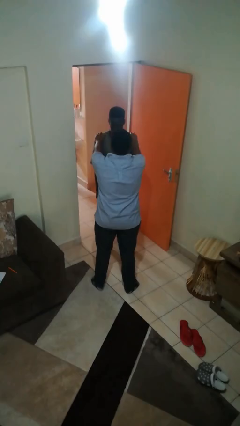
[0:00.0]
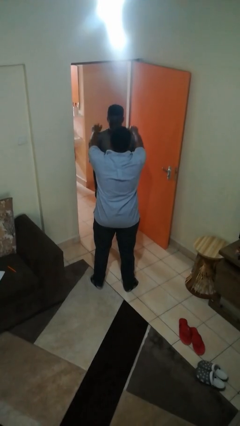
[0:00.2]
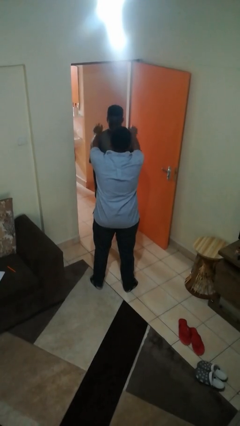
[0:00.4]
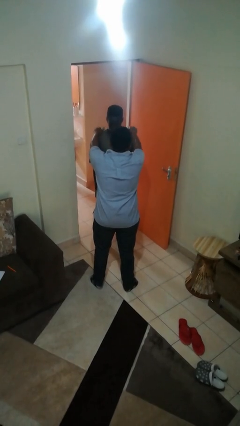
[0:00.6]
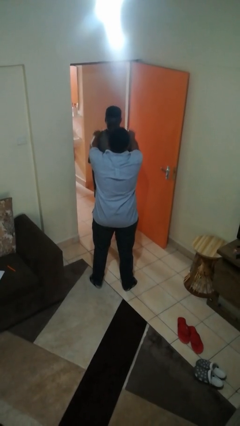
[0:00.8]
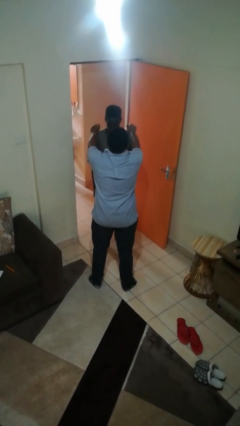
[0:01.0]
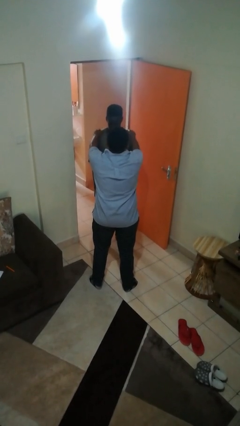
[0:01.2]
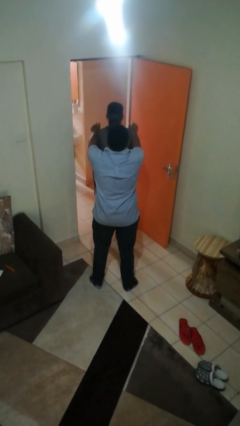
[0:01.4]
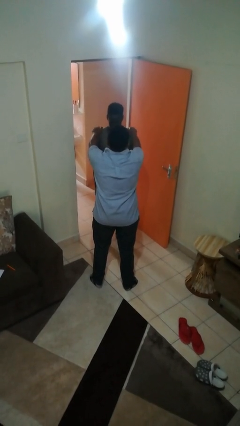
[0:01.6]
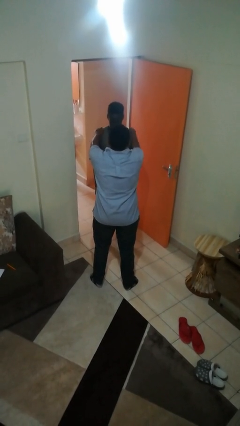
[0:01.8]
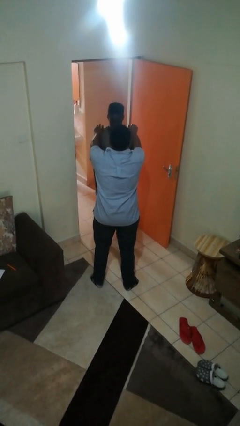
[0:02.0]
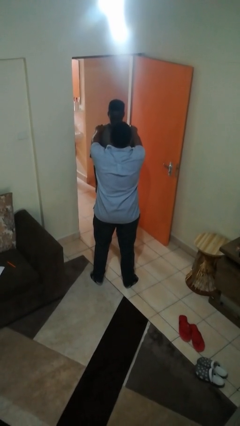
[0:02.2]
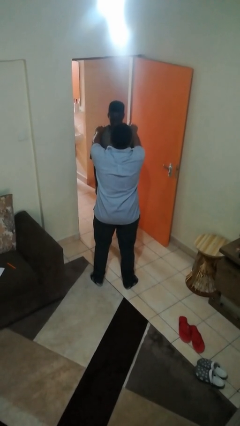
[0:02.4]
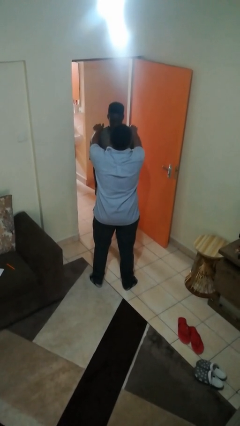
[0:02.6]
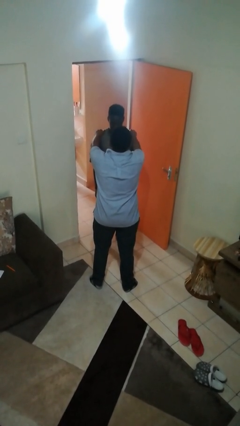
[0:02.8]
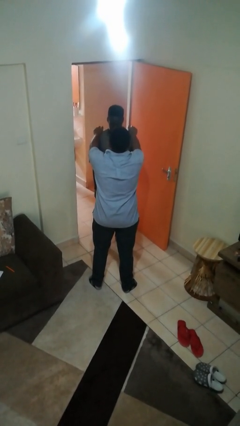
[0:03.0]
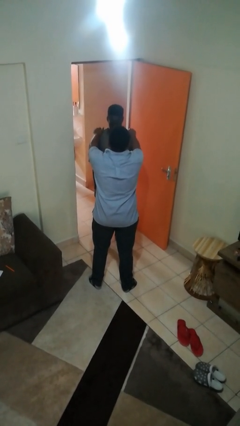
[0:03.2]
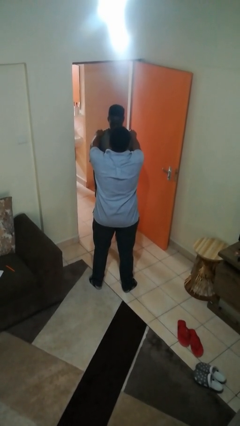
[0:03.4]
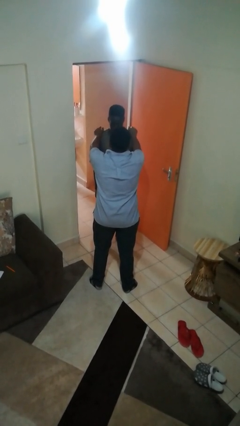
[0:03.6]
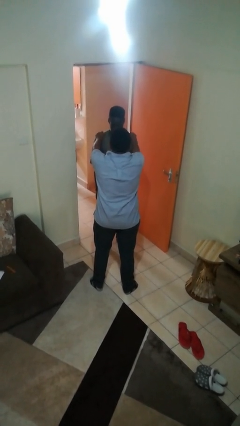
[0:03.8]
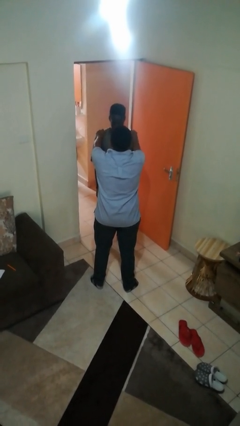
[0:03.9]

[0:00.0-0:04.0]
person pounds shoulders of person

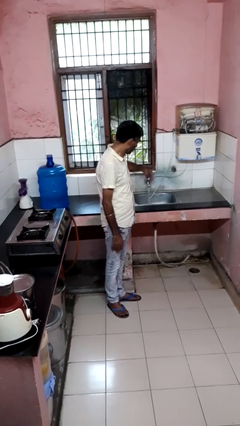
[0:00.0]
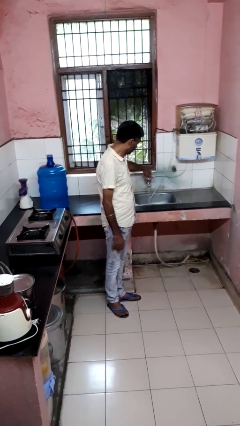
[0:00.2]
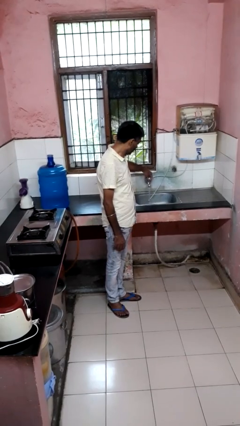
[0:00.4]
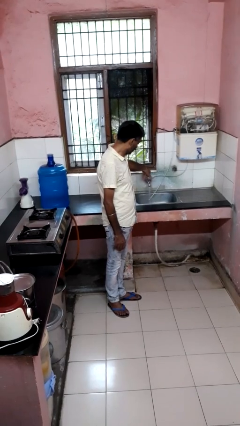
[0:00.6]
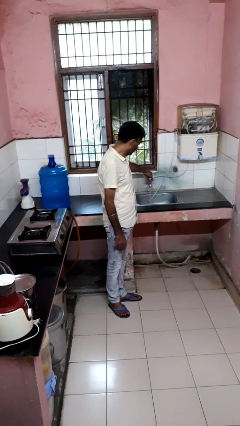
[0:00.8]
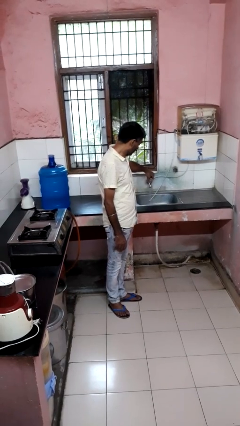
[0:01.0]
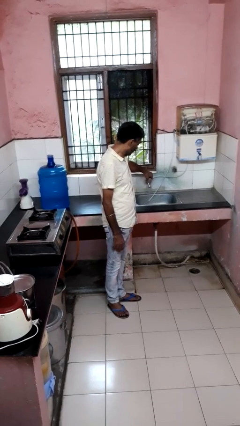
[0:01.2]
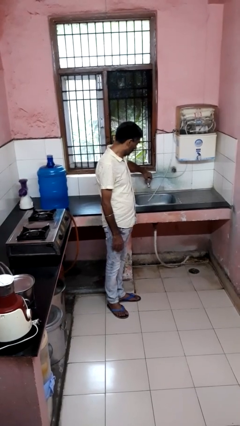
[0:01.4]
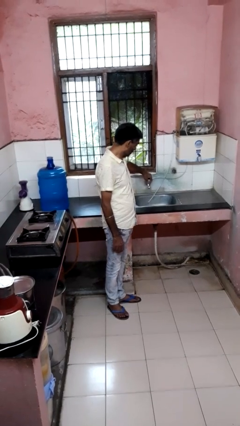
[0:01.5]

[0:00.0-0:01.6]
person turns off faucet

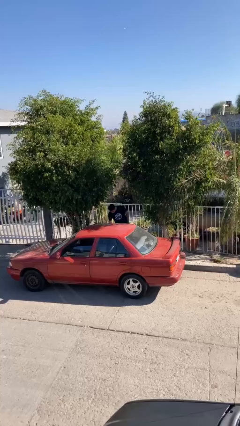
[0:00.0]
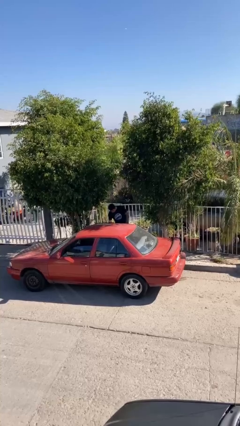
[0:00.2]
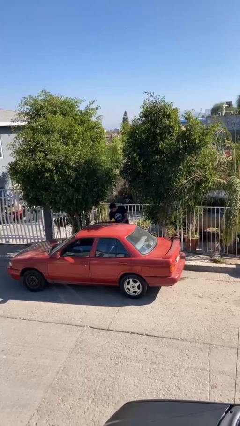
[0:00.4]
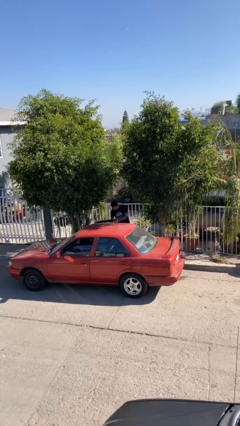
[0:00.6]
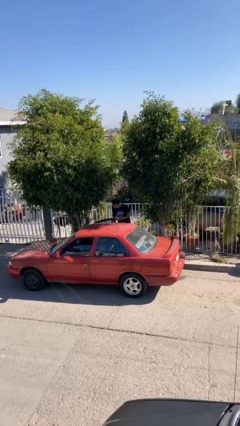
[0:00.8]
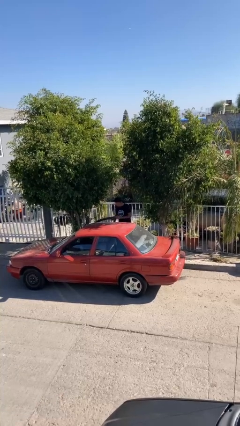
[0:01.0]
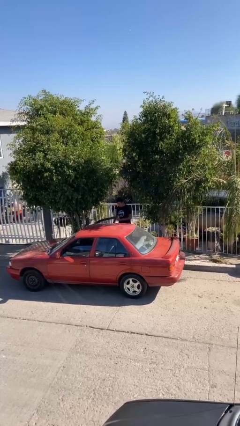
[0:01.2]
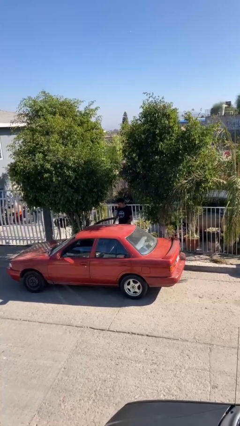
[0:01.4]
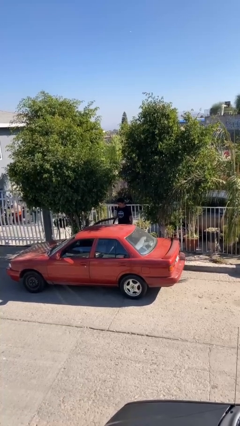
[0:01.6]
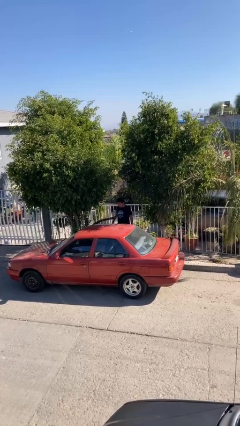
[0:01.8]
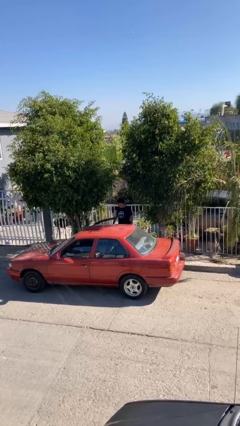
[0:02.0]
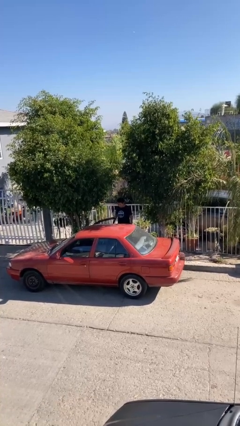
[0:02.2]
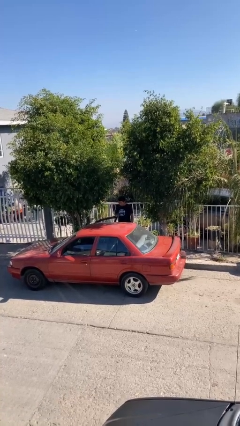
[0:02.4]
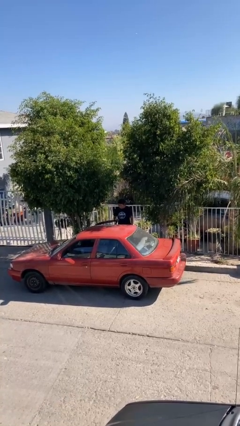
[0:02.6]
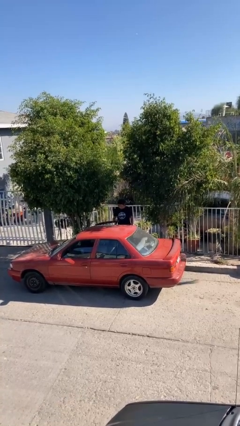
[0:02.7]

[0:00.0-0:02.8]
person opens car door

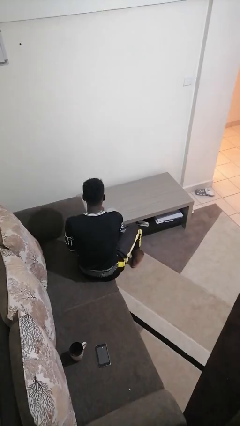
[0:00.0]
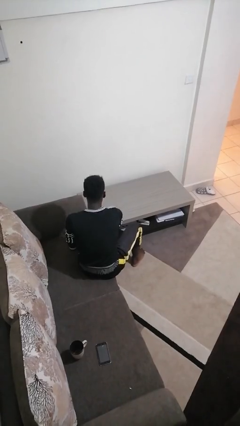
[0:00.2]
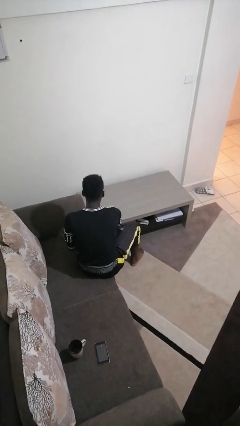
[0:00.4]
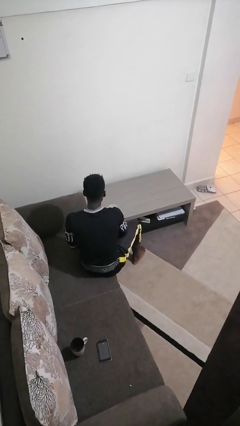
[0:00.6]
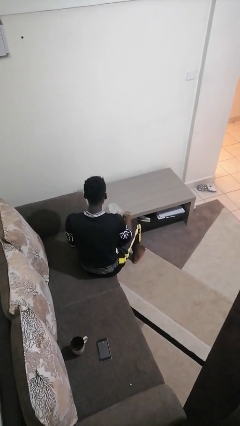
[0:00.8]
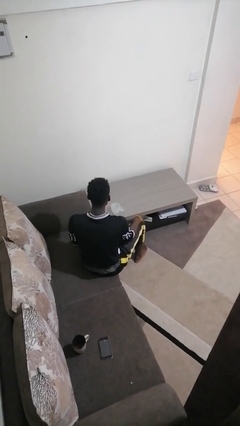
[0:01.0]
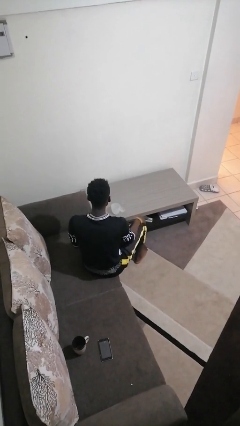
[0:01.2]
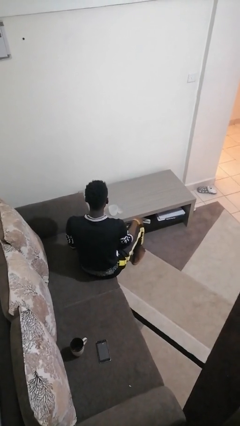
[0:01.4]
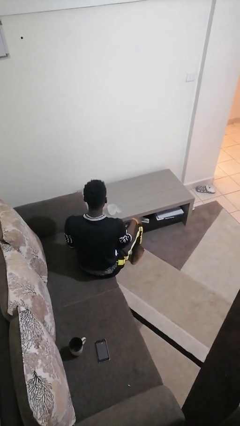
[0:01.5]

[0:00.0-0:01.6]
person puts down object on table

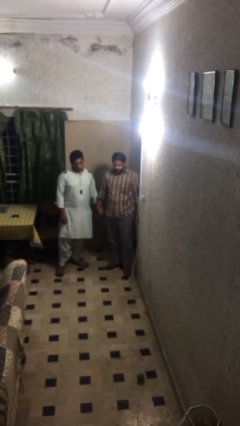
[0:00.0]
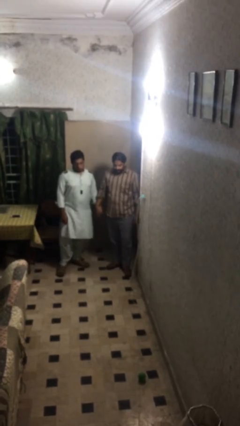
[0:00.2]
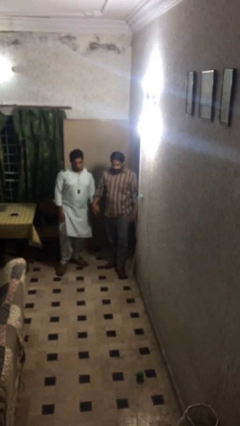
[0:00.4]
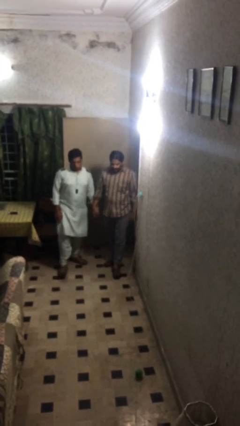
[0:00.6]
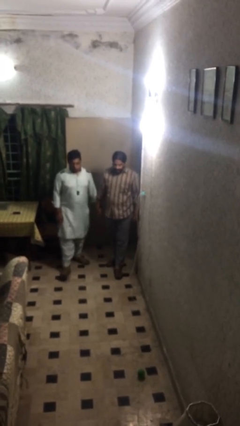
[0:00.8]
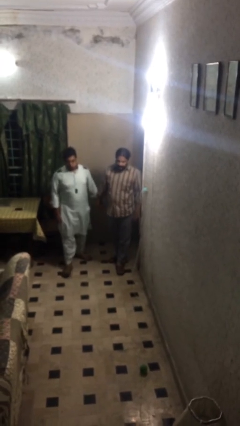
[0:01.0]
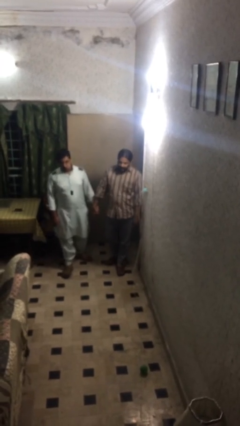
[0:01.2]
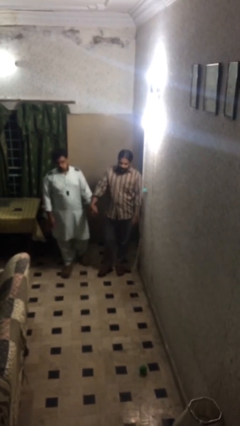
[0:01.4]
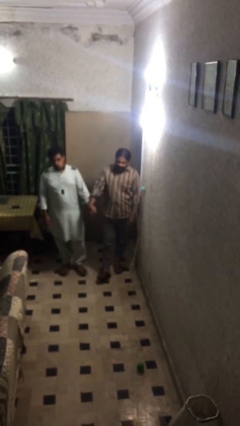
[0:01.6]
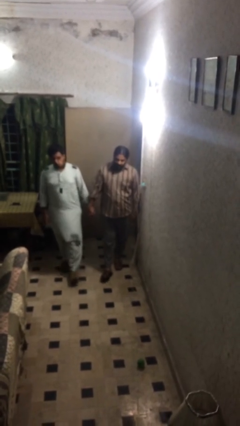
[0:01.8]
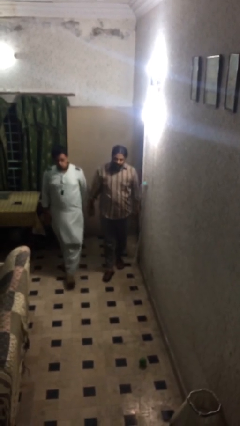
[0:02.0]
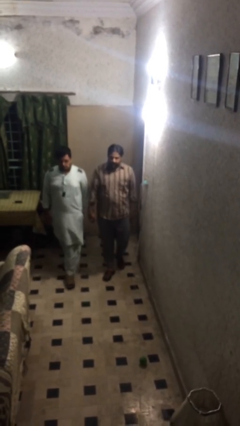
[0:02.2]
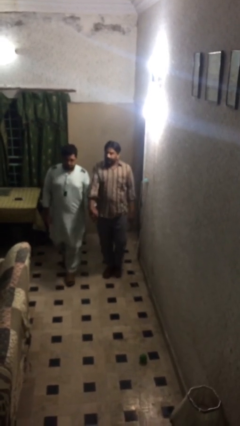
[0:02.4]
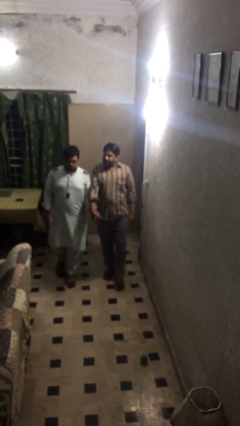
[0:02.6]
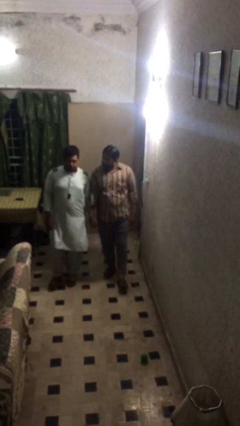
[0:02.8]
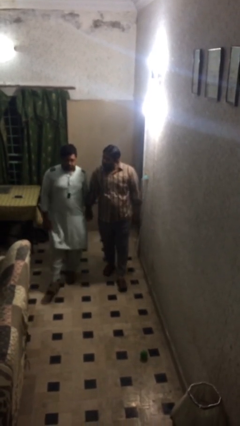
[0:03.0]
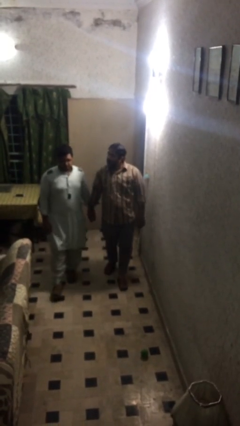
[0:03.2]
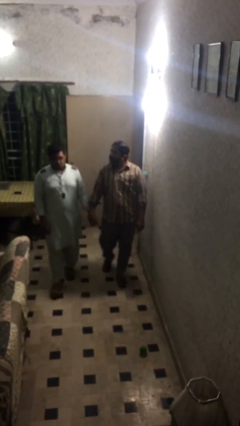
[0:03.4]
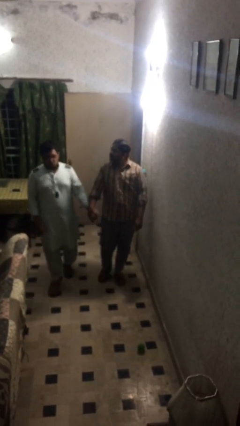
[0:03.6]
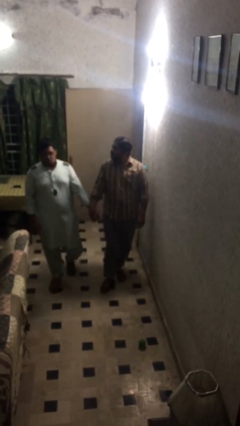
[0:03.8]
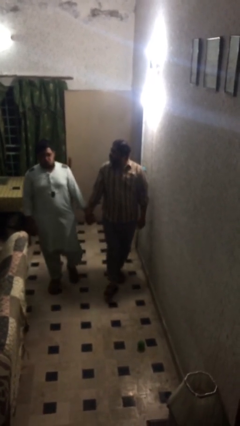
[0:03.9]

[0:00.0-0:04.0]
person holds hand

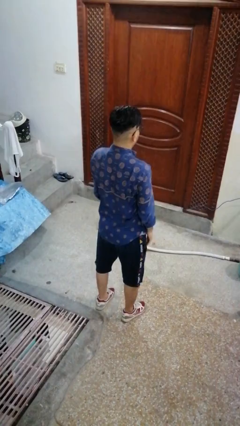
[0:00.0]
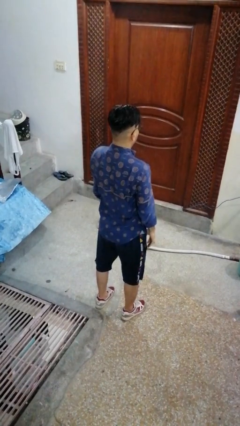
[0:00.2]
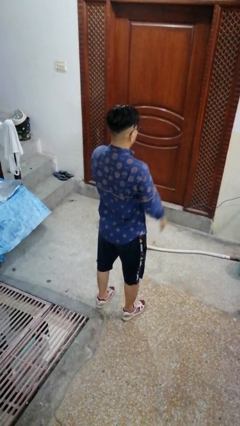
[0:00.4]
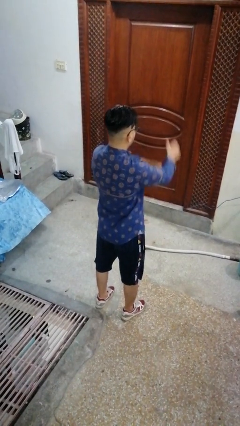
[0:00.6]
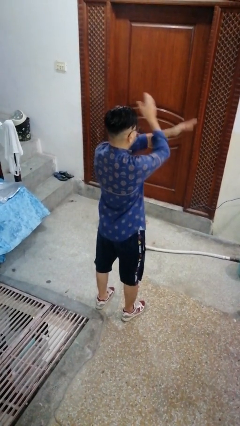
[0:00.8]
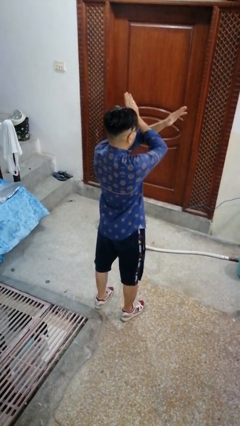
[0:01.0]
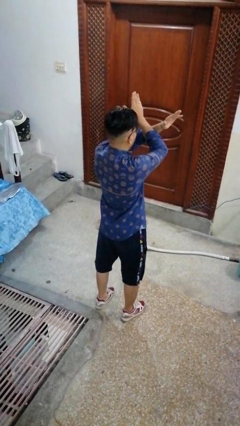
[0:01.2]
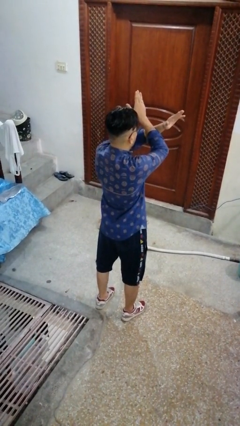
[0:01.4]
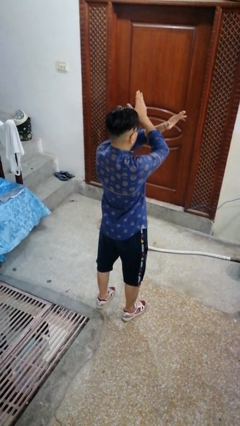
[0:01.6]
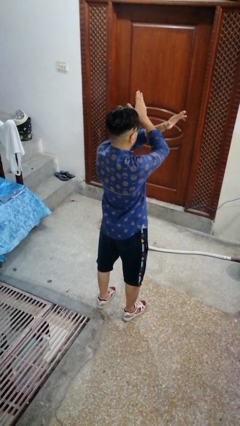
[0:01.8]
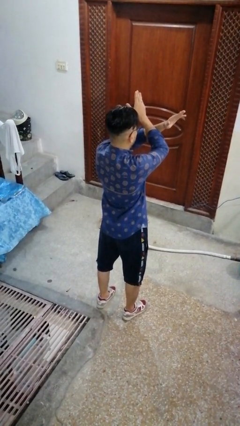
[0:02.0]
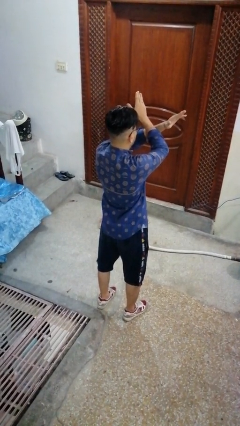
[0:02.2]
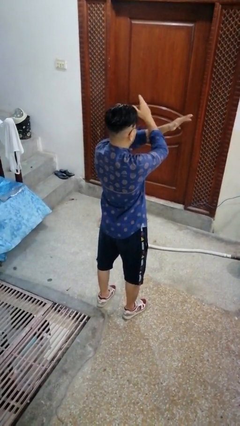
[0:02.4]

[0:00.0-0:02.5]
person gestures arms x

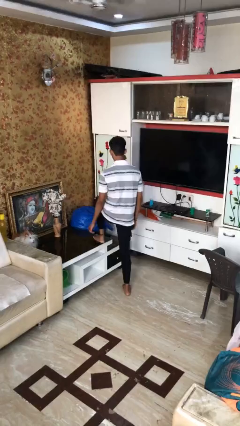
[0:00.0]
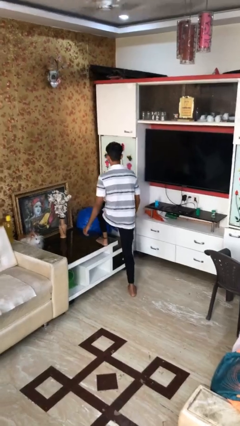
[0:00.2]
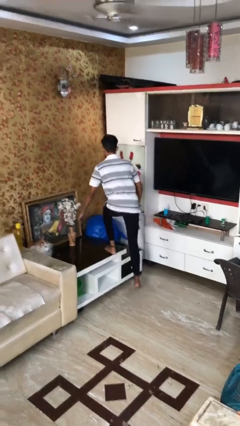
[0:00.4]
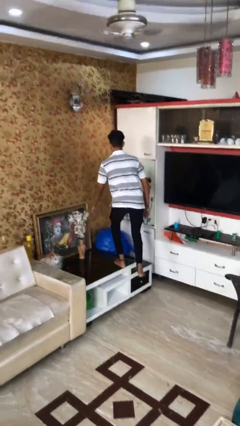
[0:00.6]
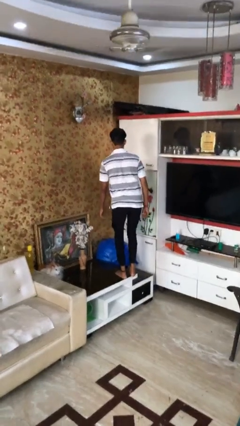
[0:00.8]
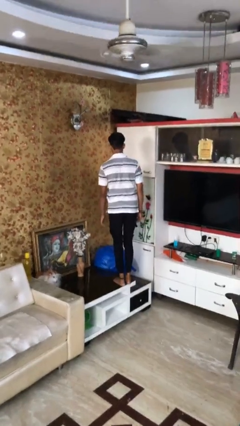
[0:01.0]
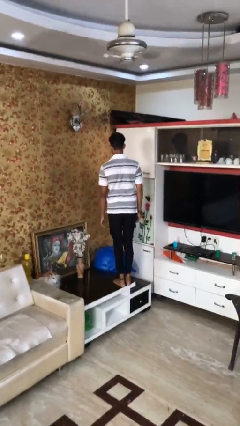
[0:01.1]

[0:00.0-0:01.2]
person climbs on table
